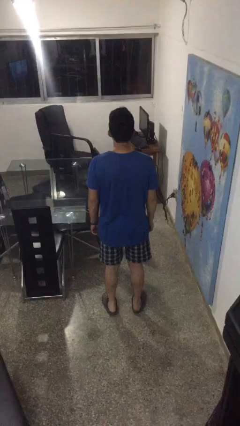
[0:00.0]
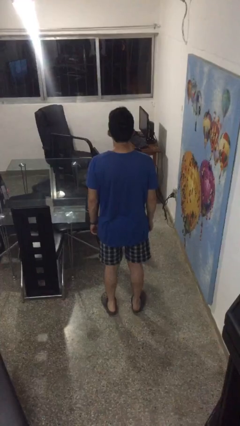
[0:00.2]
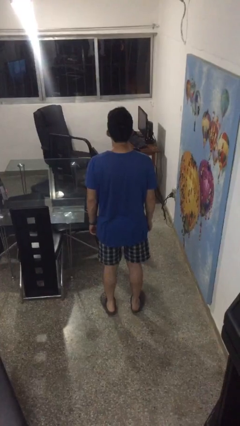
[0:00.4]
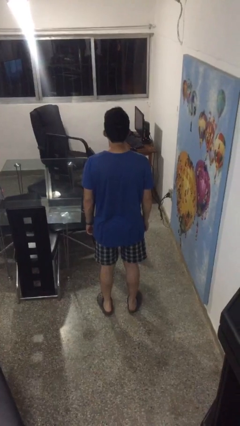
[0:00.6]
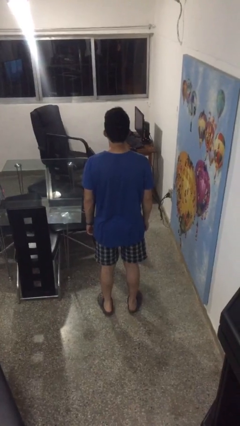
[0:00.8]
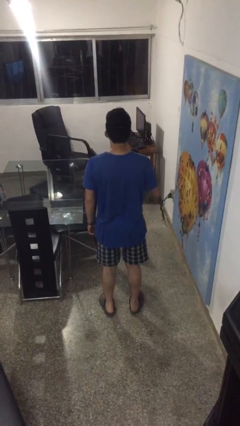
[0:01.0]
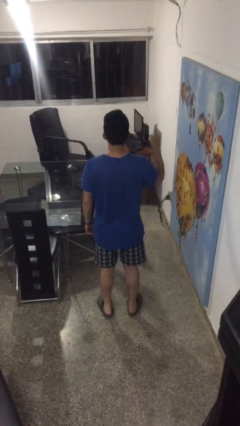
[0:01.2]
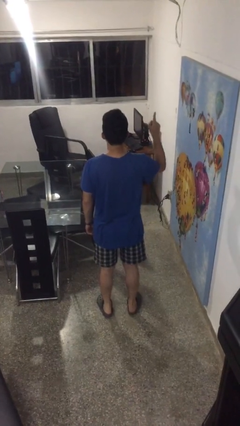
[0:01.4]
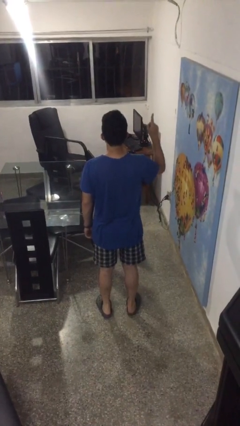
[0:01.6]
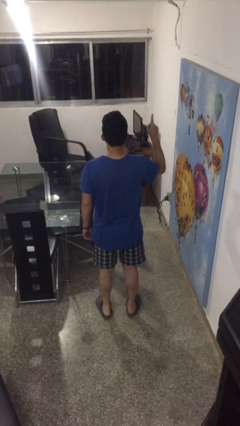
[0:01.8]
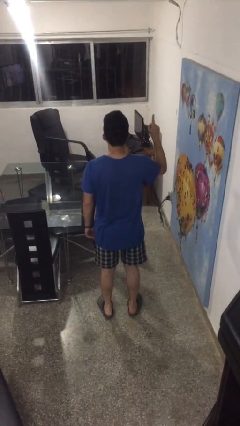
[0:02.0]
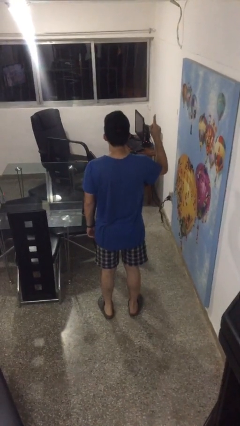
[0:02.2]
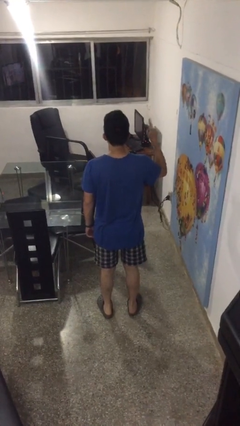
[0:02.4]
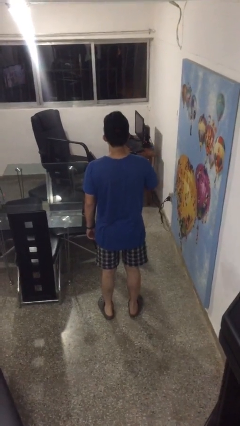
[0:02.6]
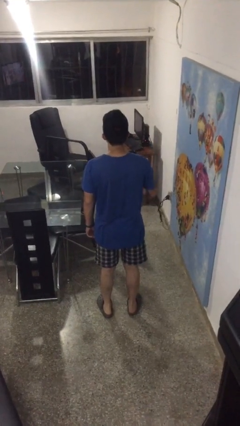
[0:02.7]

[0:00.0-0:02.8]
person gestures number one

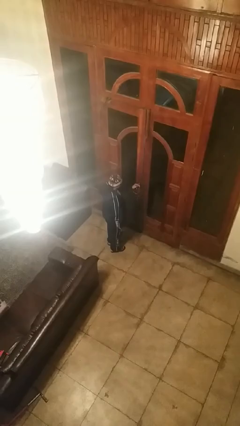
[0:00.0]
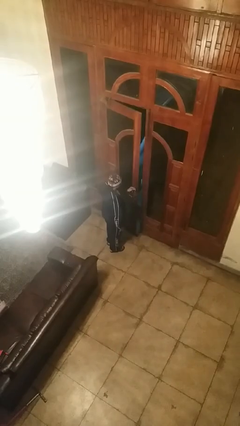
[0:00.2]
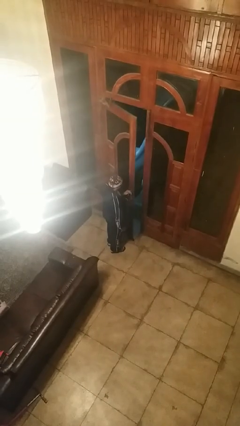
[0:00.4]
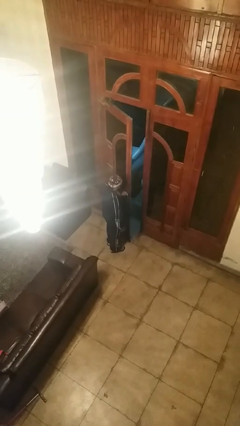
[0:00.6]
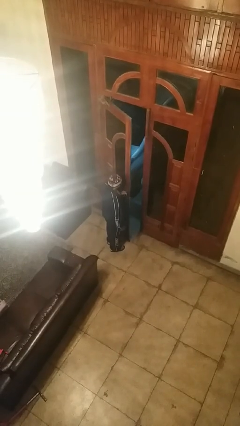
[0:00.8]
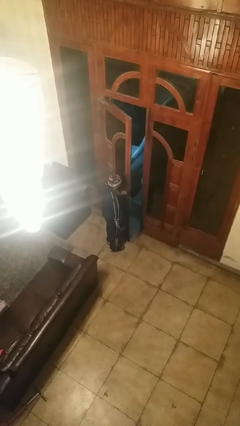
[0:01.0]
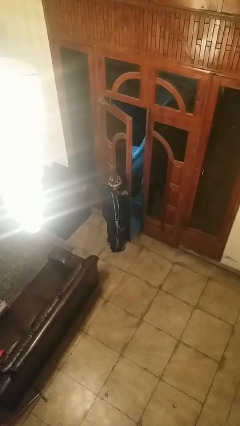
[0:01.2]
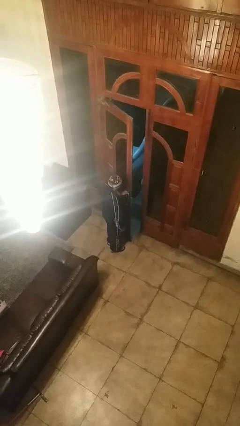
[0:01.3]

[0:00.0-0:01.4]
person opens facility door

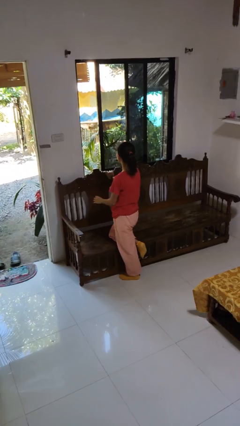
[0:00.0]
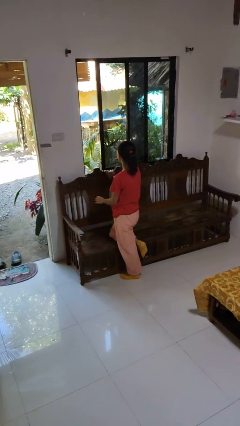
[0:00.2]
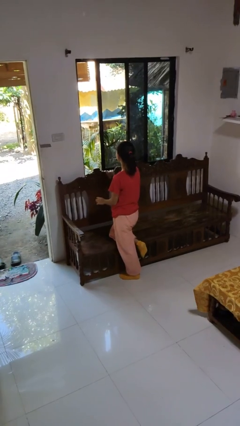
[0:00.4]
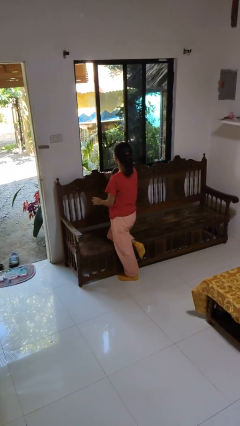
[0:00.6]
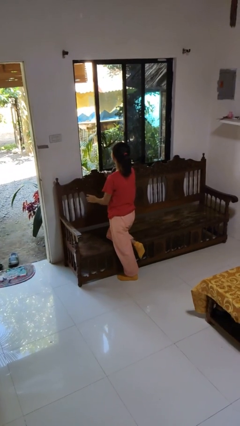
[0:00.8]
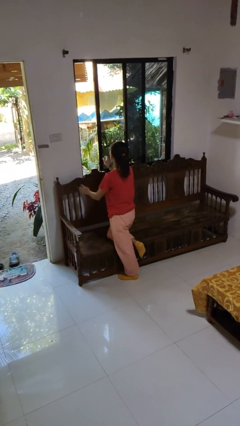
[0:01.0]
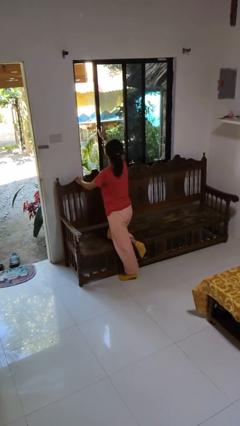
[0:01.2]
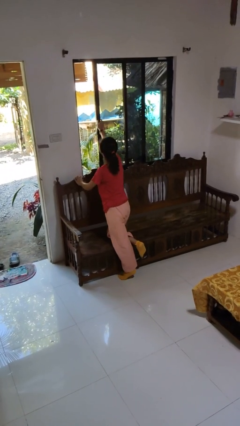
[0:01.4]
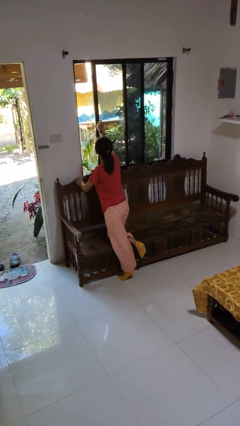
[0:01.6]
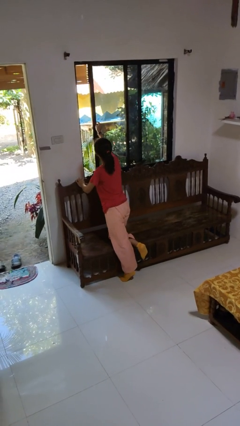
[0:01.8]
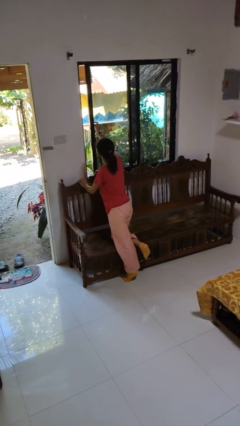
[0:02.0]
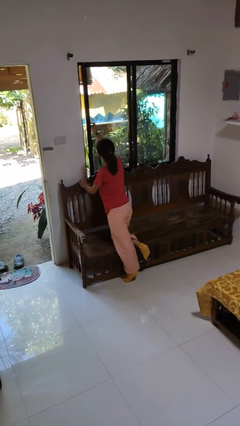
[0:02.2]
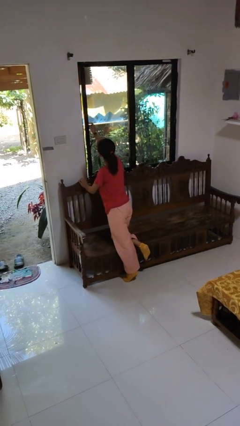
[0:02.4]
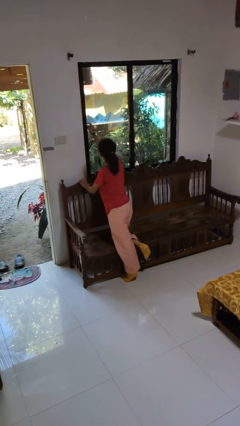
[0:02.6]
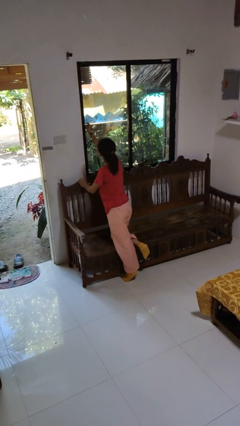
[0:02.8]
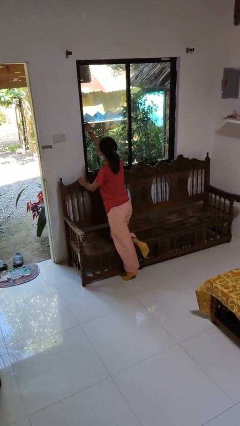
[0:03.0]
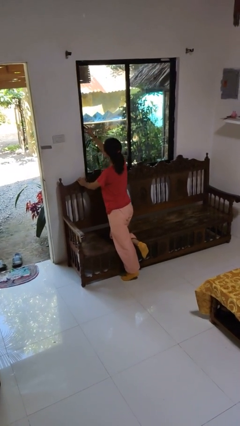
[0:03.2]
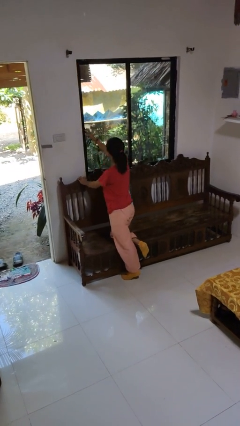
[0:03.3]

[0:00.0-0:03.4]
person closes home window

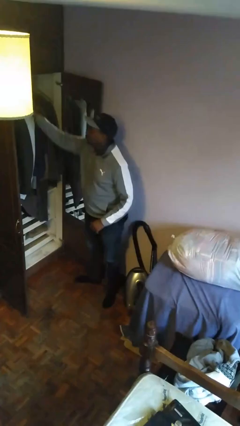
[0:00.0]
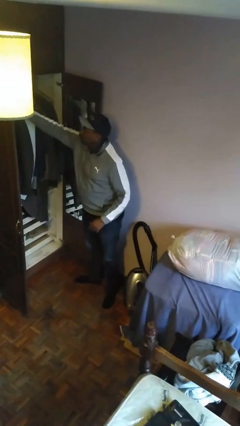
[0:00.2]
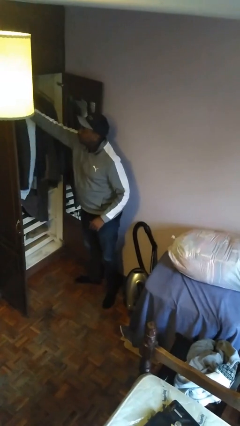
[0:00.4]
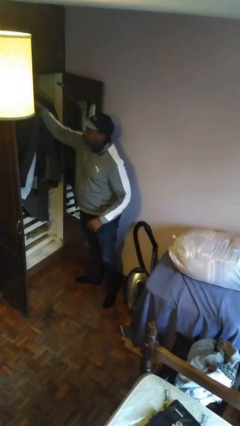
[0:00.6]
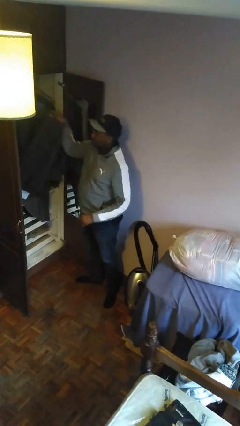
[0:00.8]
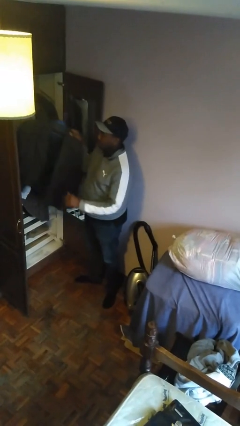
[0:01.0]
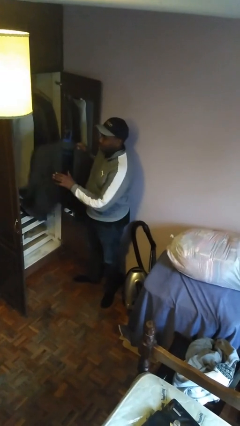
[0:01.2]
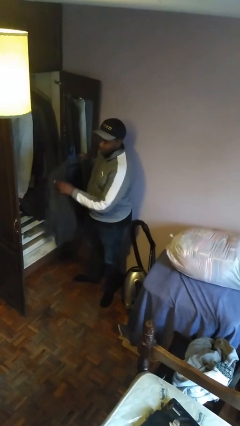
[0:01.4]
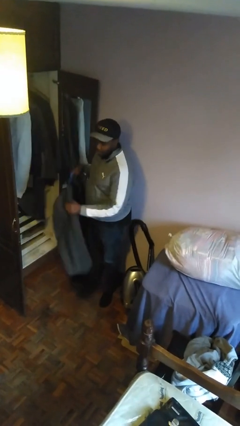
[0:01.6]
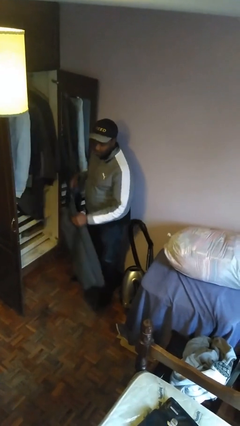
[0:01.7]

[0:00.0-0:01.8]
person takes clothes from closet

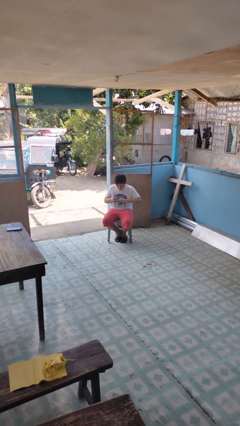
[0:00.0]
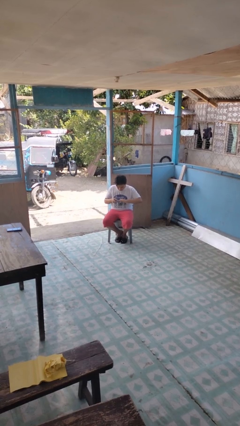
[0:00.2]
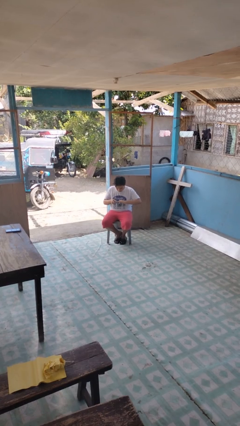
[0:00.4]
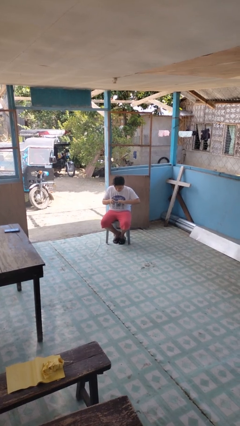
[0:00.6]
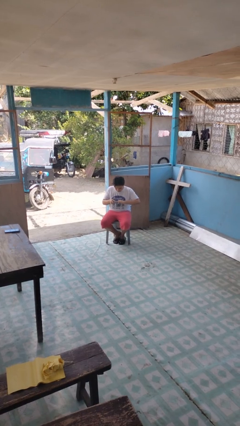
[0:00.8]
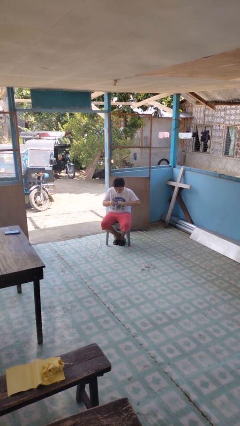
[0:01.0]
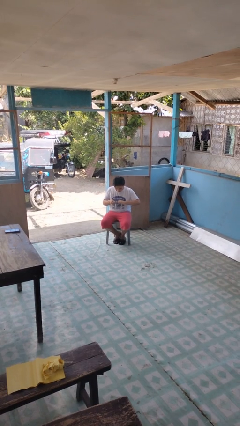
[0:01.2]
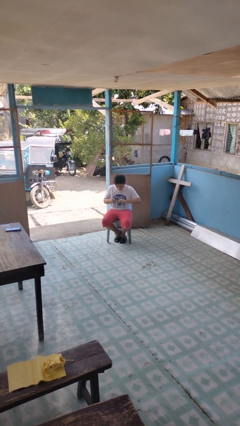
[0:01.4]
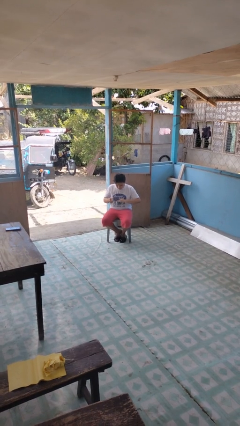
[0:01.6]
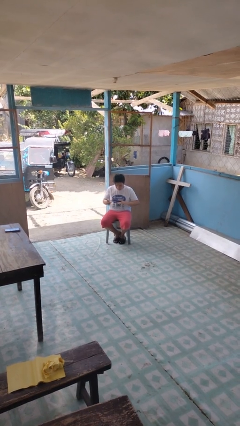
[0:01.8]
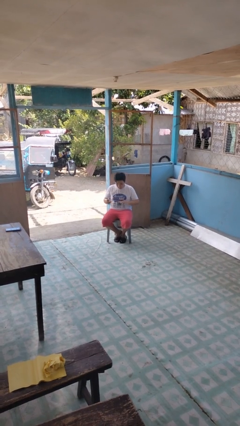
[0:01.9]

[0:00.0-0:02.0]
person clips fingernails

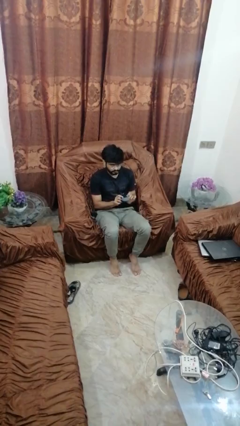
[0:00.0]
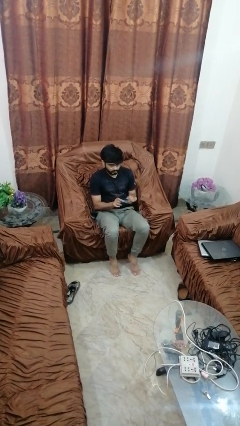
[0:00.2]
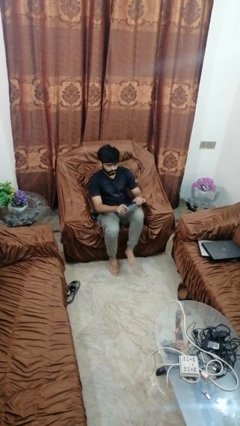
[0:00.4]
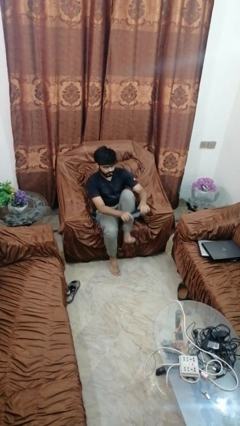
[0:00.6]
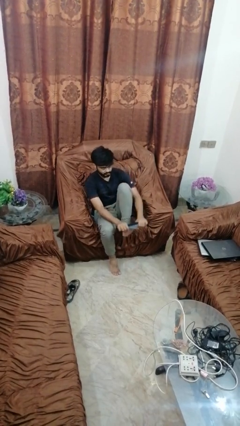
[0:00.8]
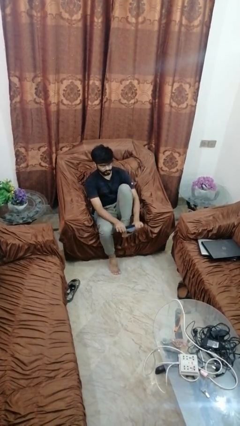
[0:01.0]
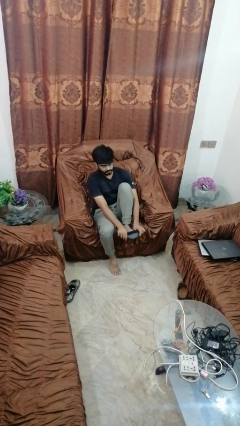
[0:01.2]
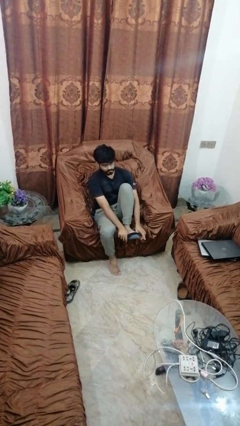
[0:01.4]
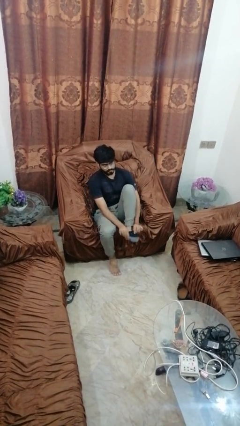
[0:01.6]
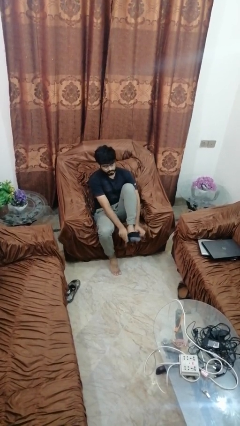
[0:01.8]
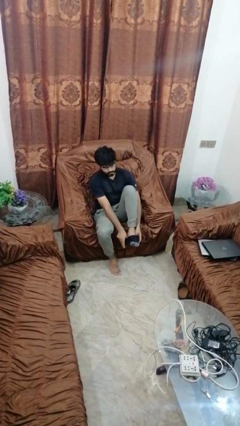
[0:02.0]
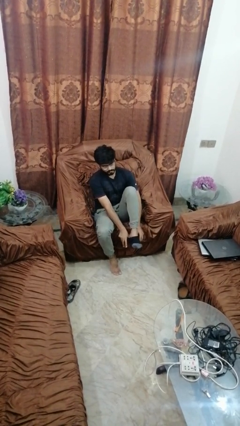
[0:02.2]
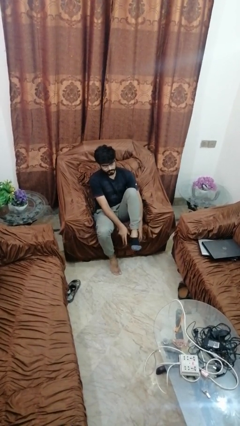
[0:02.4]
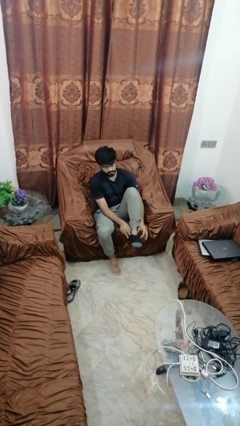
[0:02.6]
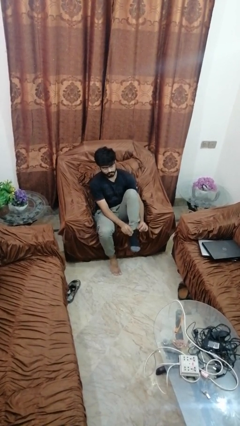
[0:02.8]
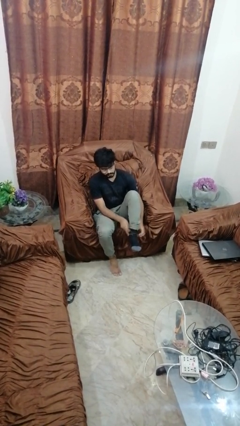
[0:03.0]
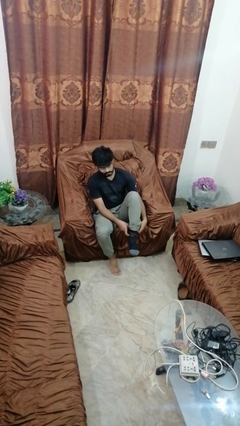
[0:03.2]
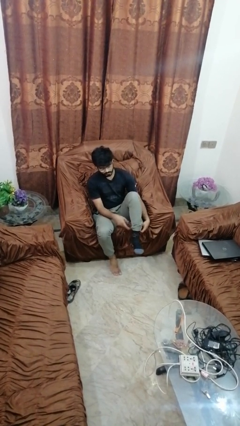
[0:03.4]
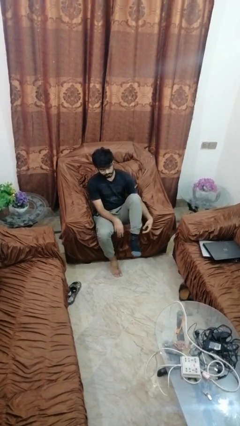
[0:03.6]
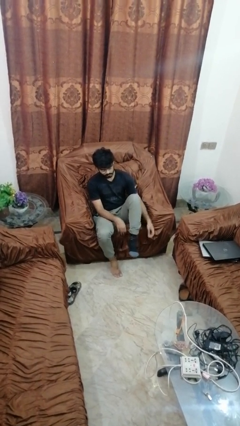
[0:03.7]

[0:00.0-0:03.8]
person puts on socks

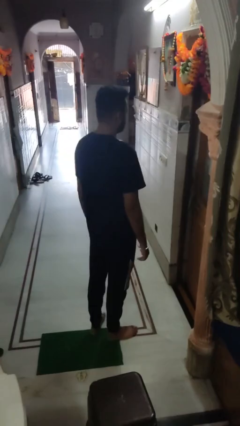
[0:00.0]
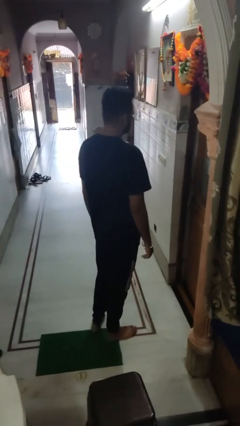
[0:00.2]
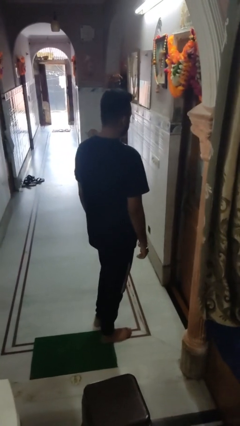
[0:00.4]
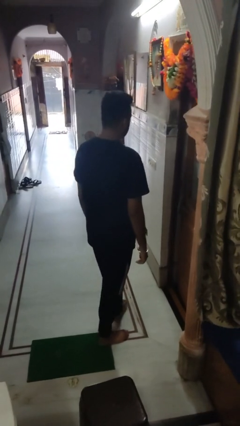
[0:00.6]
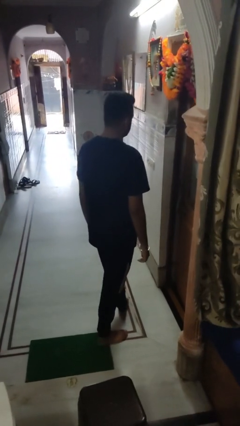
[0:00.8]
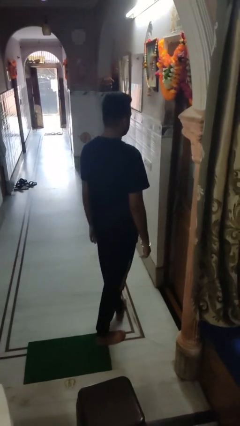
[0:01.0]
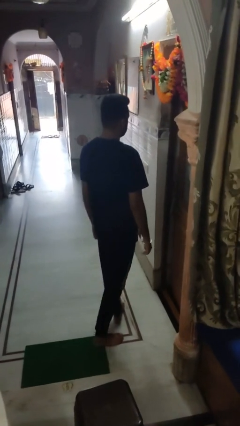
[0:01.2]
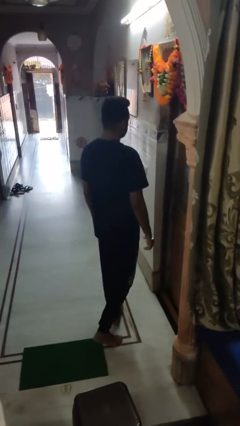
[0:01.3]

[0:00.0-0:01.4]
person bumps into wall

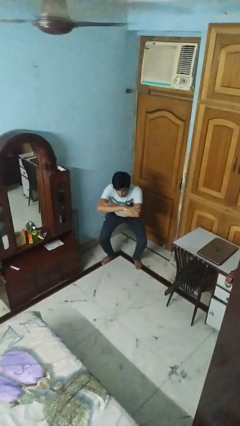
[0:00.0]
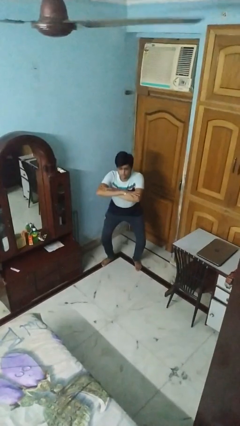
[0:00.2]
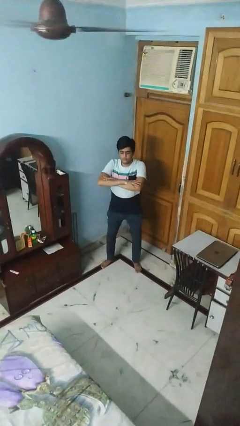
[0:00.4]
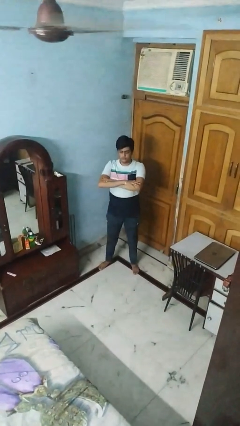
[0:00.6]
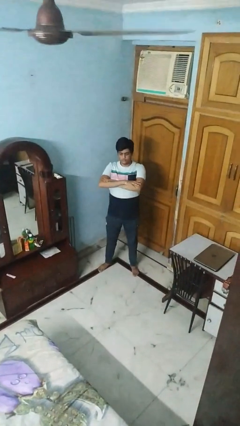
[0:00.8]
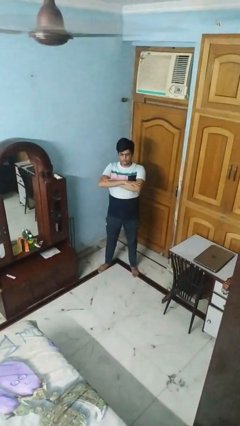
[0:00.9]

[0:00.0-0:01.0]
person stands up
